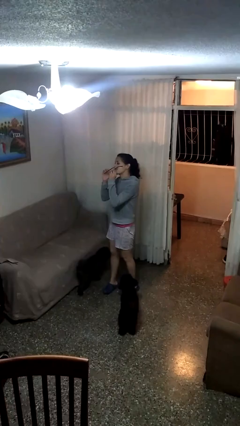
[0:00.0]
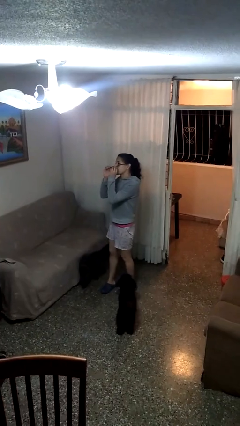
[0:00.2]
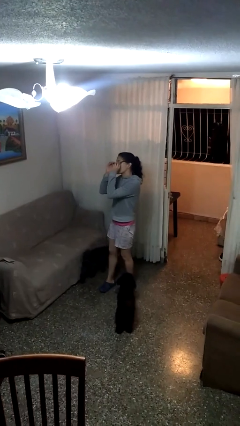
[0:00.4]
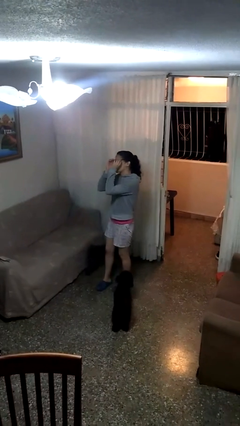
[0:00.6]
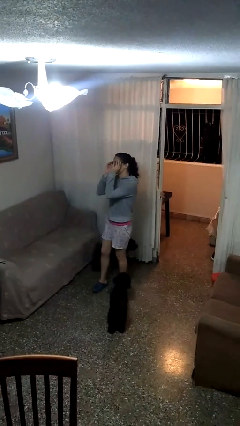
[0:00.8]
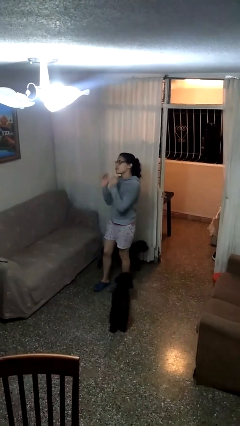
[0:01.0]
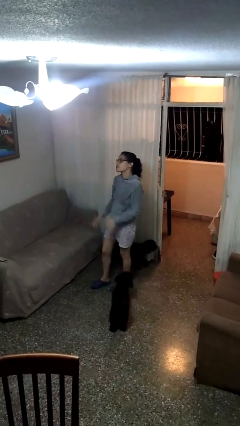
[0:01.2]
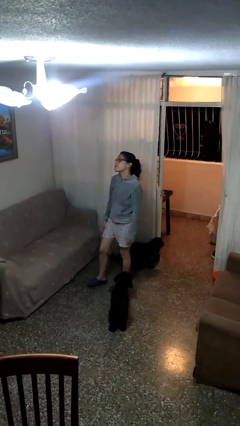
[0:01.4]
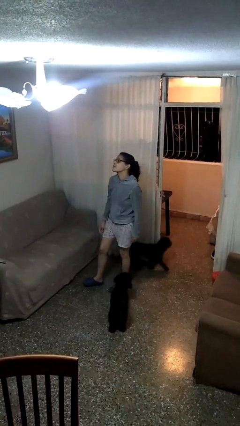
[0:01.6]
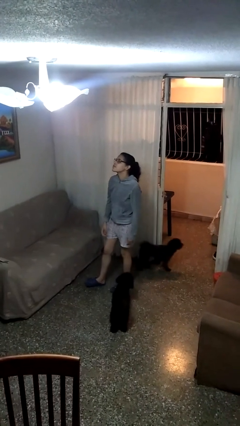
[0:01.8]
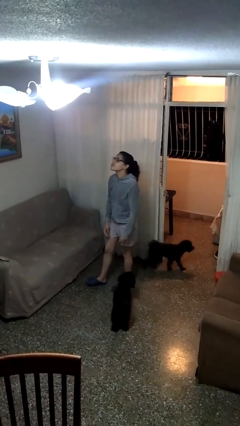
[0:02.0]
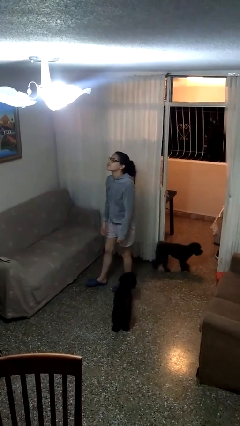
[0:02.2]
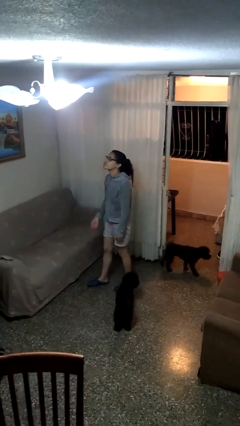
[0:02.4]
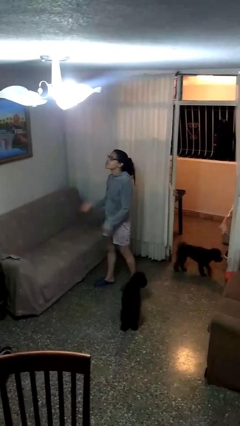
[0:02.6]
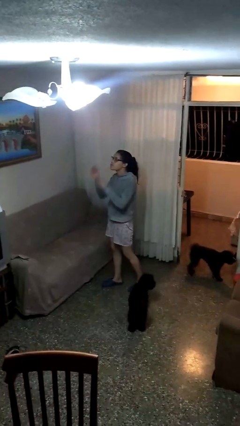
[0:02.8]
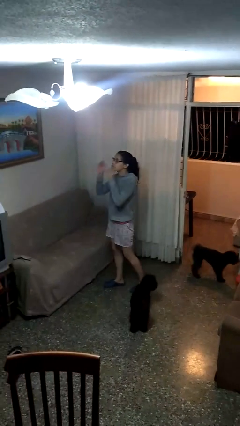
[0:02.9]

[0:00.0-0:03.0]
person puts on glasses

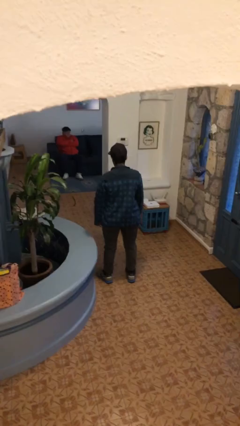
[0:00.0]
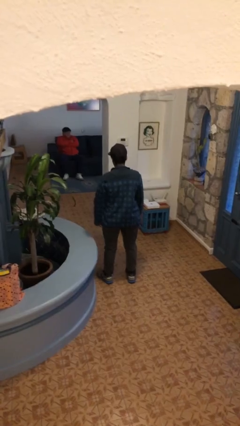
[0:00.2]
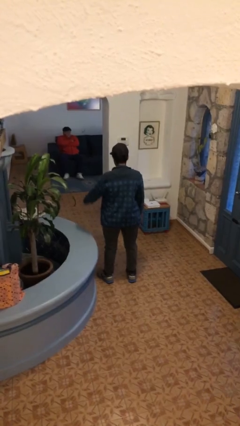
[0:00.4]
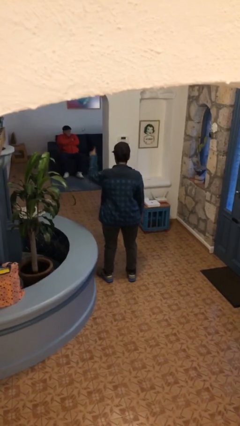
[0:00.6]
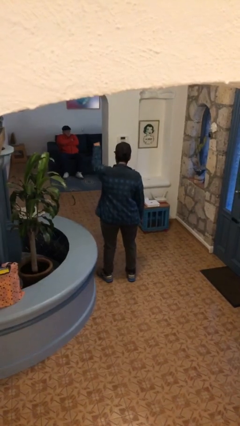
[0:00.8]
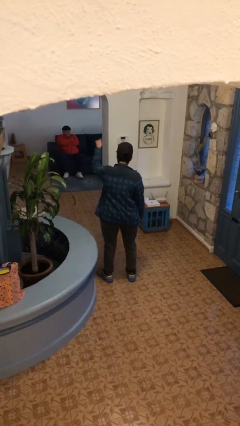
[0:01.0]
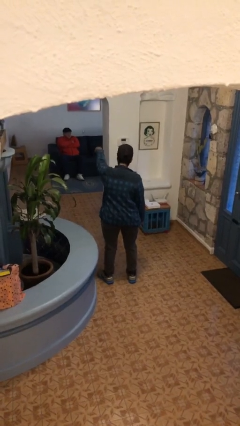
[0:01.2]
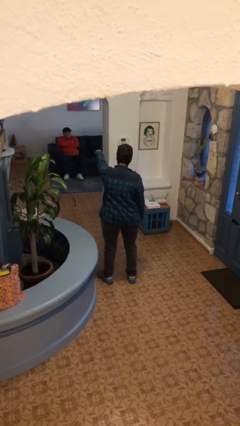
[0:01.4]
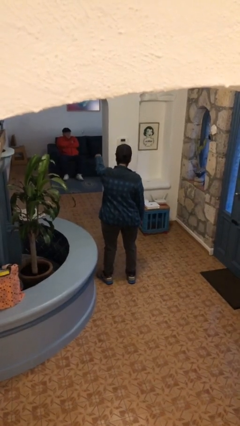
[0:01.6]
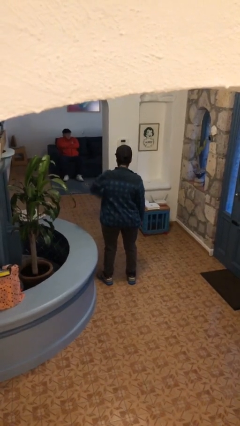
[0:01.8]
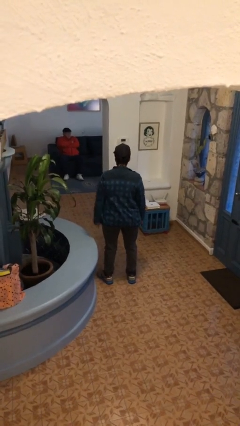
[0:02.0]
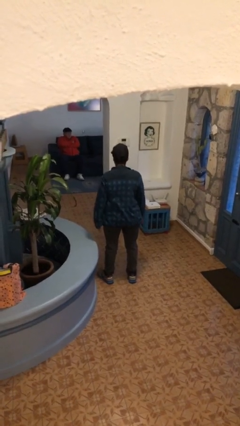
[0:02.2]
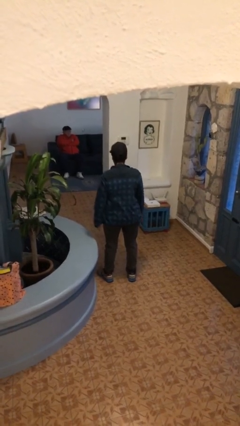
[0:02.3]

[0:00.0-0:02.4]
person points at person

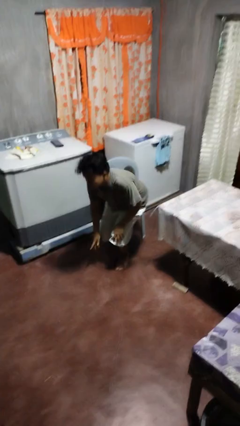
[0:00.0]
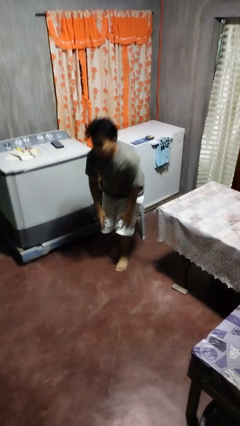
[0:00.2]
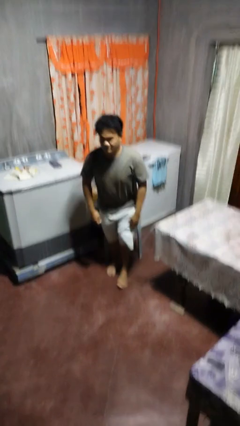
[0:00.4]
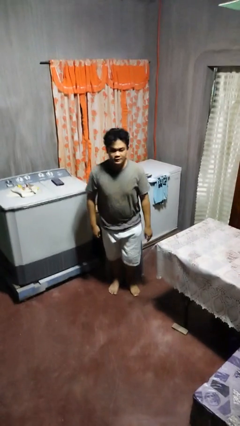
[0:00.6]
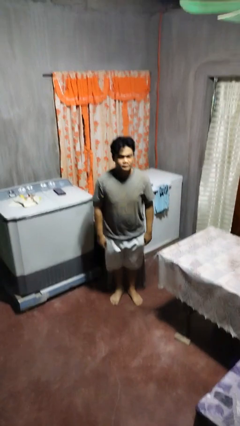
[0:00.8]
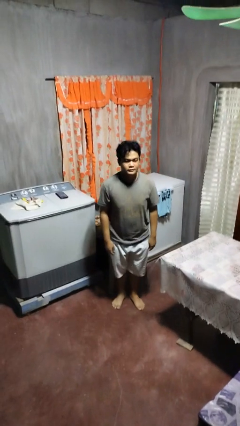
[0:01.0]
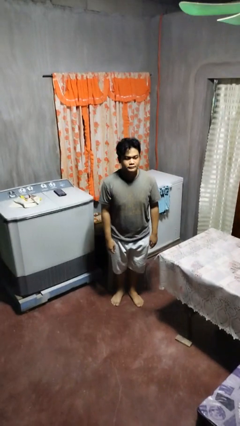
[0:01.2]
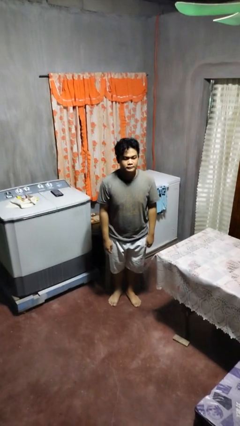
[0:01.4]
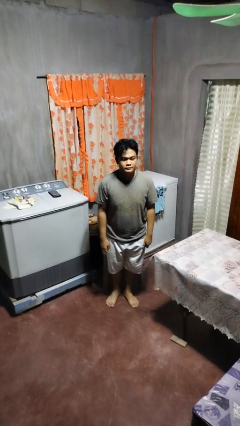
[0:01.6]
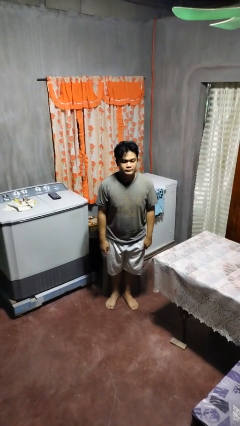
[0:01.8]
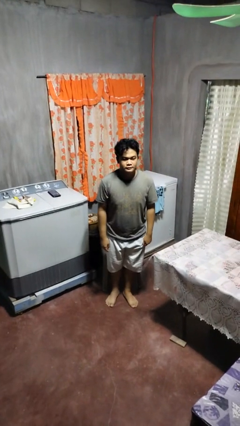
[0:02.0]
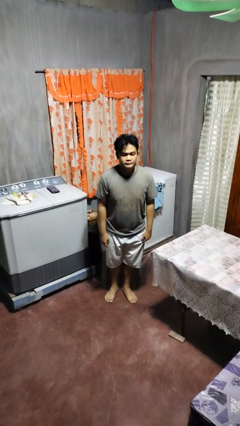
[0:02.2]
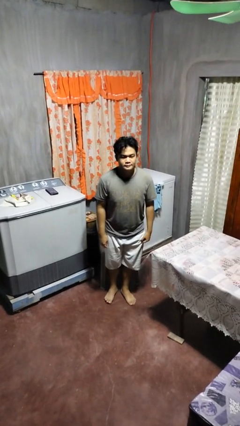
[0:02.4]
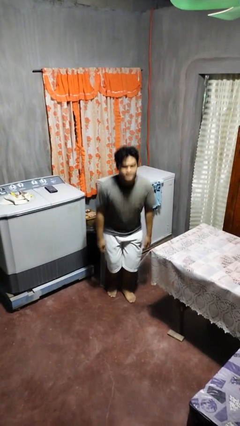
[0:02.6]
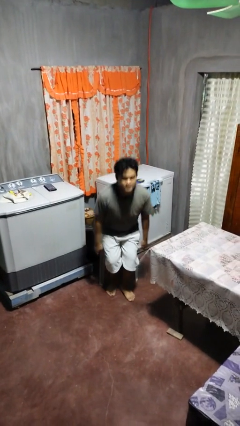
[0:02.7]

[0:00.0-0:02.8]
person stands up from floor

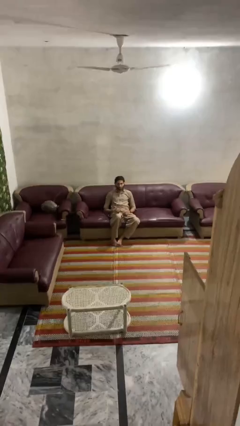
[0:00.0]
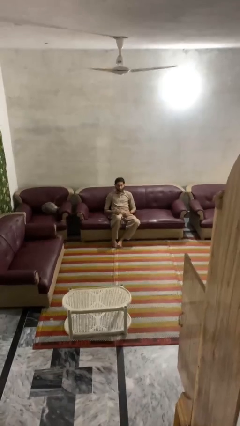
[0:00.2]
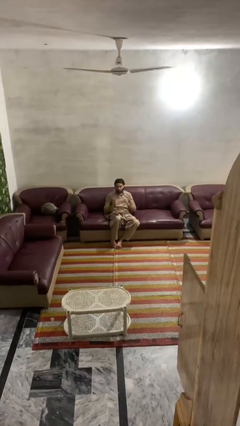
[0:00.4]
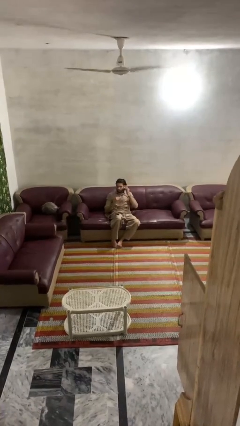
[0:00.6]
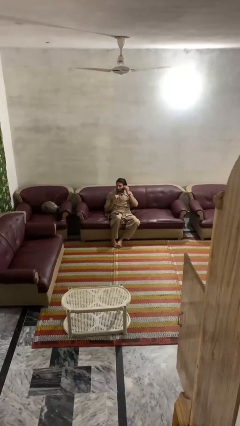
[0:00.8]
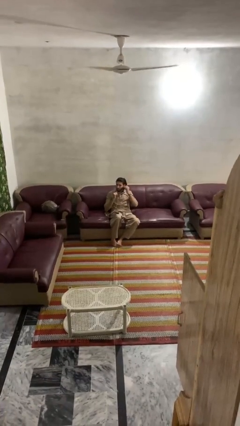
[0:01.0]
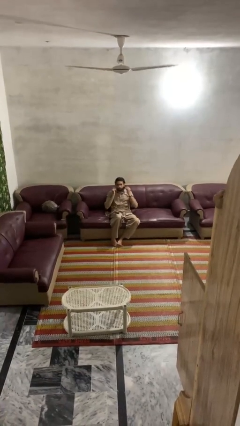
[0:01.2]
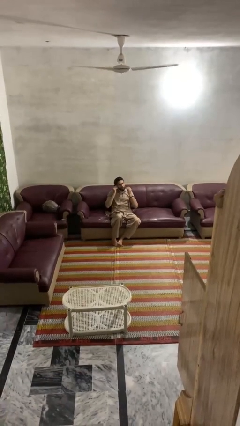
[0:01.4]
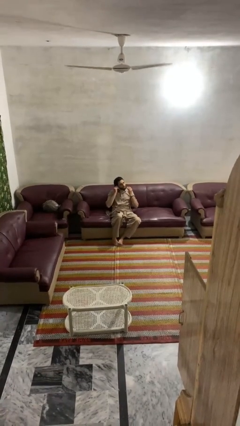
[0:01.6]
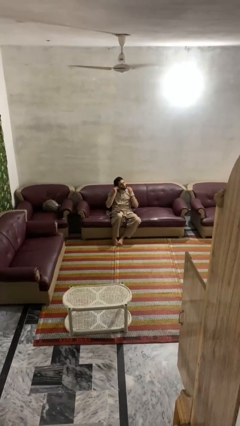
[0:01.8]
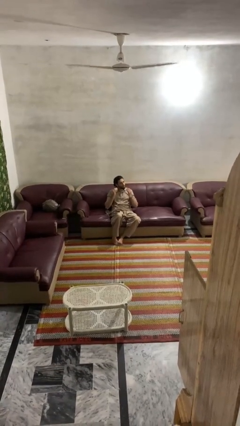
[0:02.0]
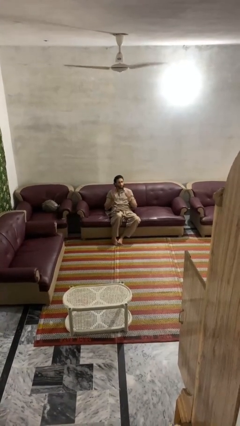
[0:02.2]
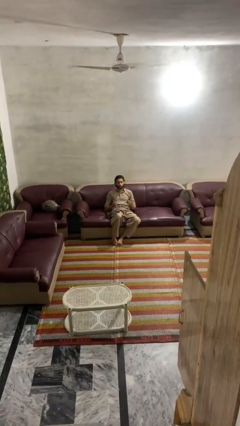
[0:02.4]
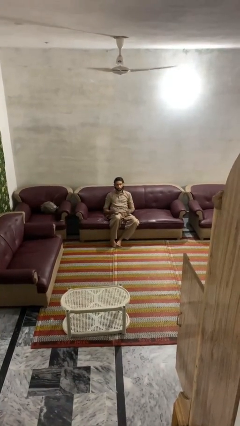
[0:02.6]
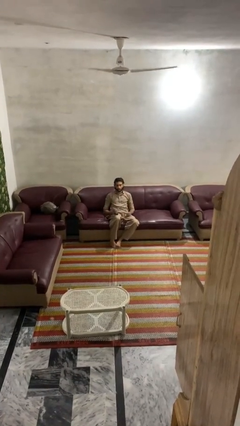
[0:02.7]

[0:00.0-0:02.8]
person takes off headphones

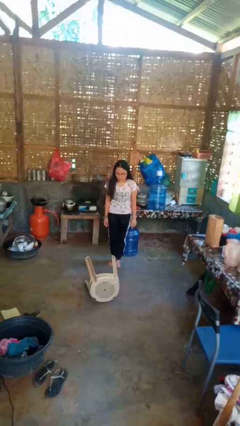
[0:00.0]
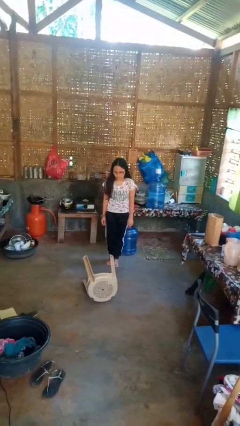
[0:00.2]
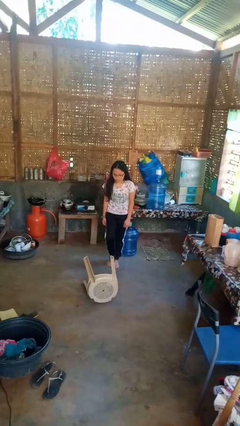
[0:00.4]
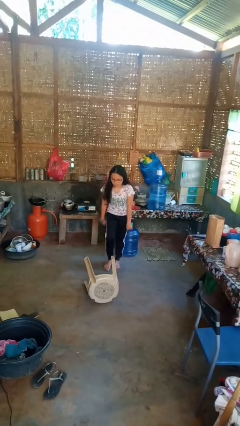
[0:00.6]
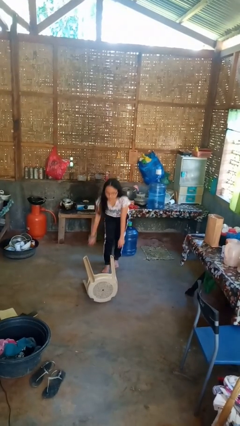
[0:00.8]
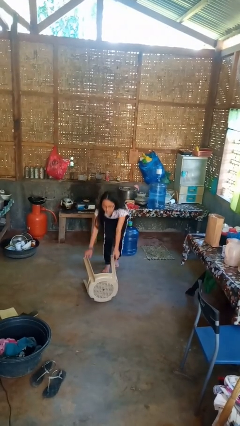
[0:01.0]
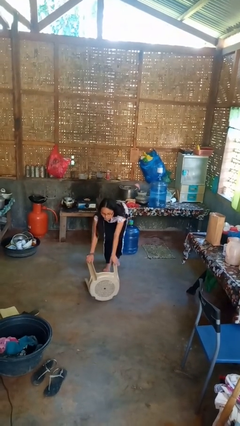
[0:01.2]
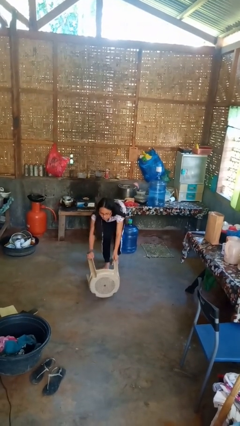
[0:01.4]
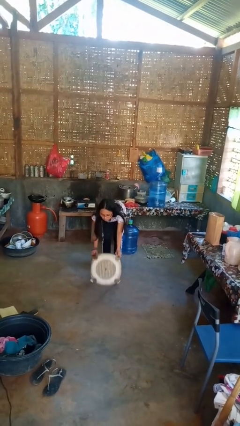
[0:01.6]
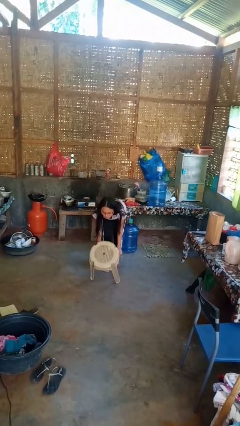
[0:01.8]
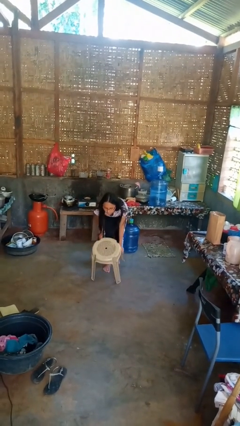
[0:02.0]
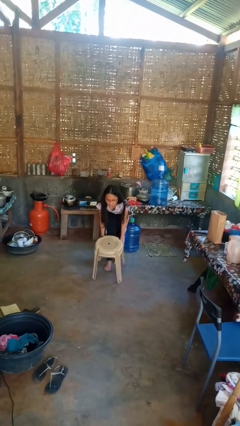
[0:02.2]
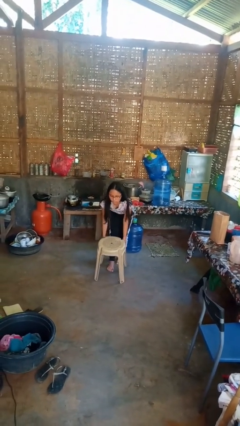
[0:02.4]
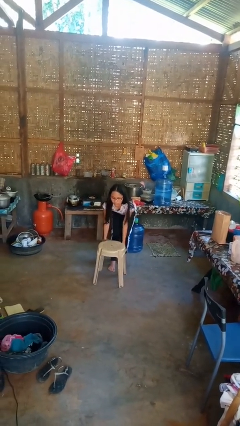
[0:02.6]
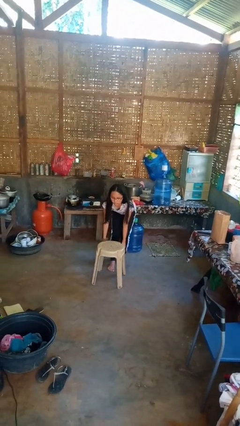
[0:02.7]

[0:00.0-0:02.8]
person sets upright furniture

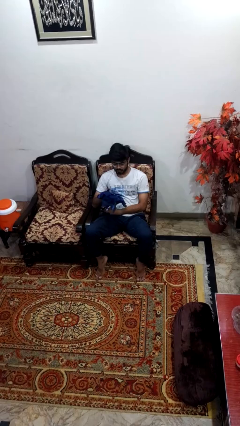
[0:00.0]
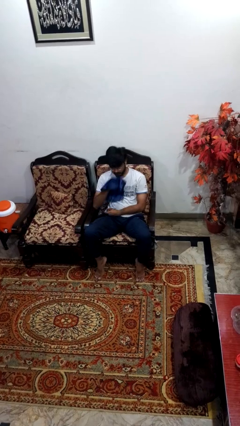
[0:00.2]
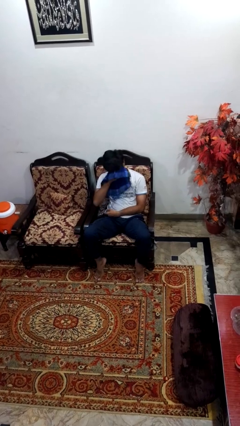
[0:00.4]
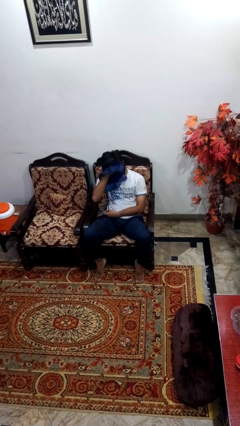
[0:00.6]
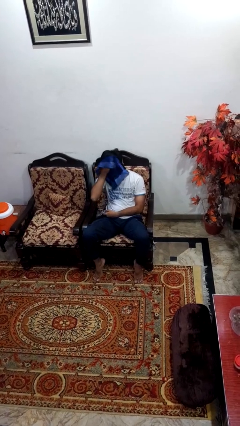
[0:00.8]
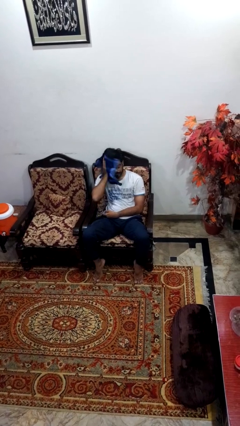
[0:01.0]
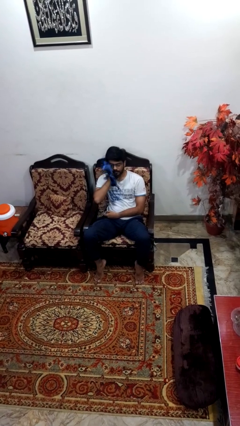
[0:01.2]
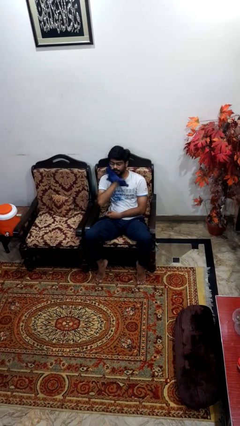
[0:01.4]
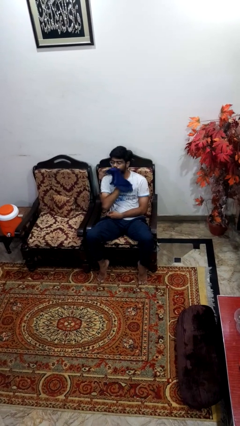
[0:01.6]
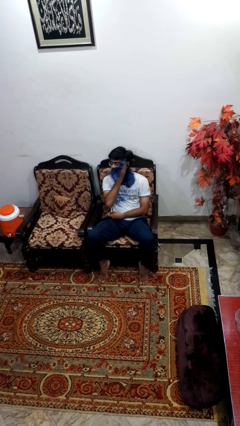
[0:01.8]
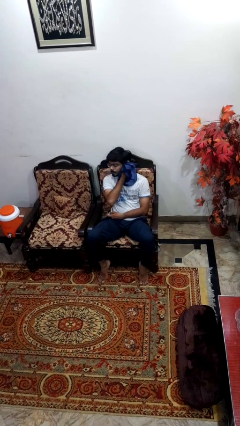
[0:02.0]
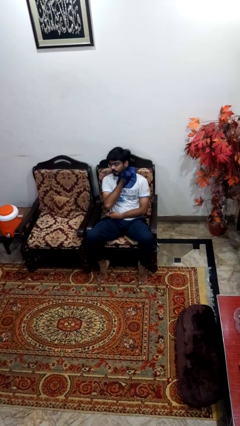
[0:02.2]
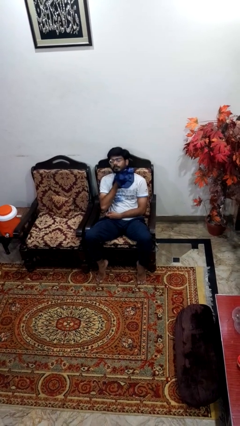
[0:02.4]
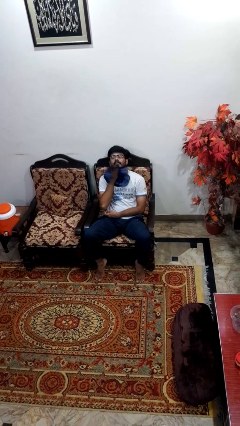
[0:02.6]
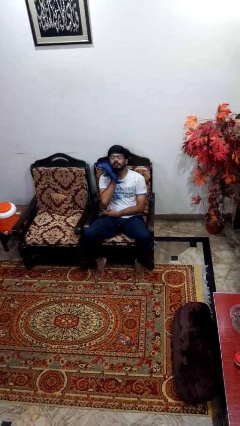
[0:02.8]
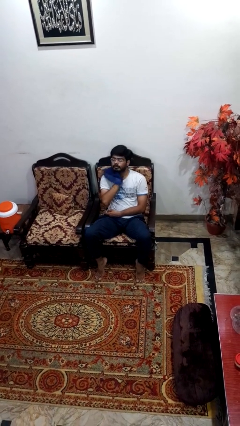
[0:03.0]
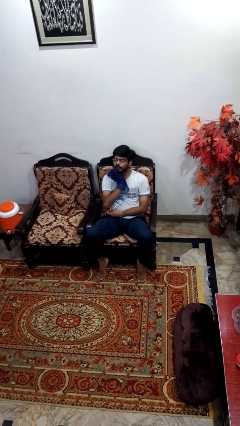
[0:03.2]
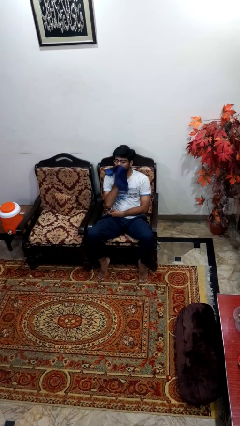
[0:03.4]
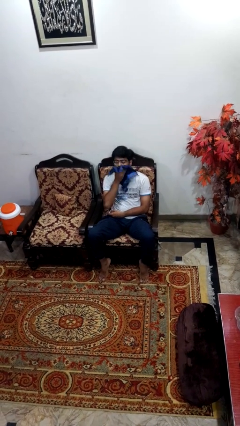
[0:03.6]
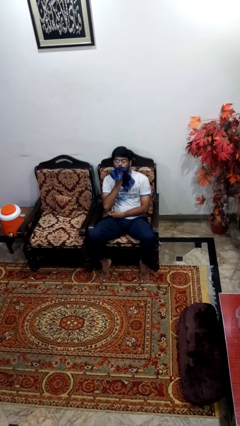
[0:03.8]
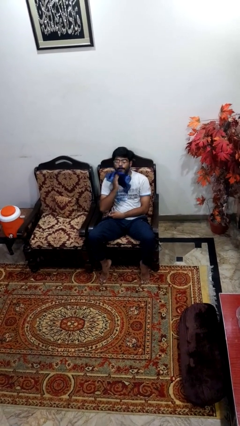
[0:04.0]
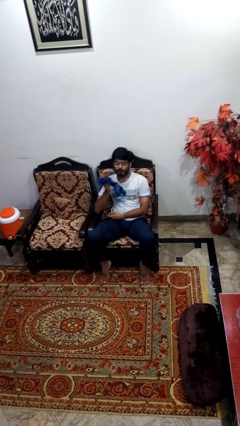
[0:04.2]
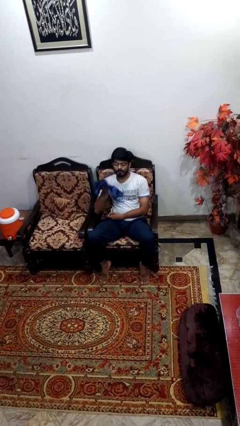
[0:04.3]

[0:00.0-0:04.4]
person wipes mouth with napkin
